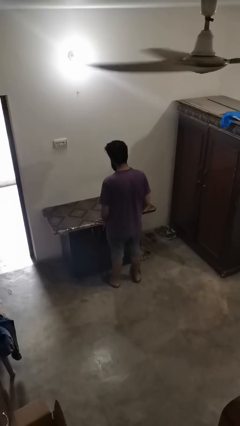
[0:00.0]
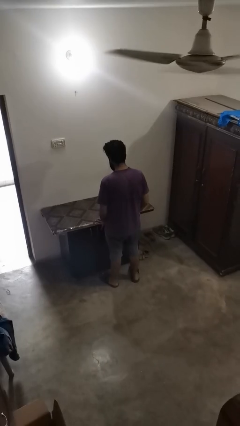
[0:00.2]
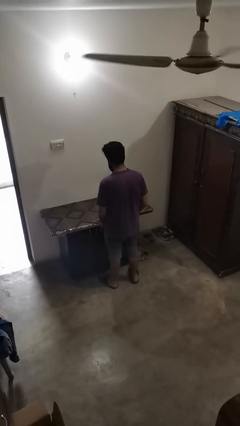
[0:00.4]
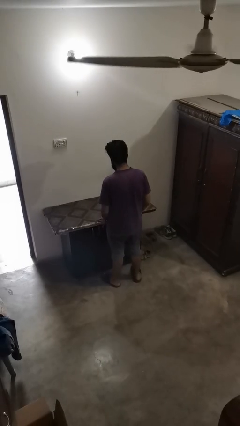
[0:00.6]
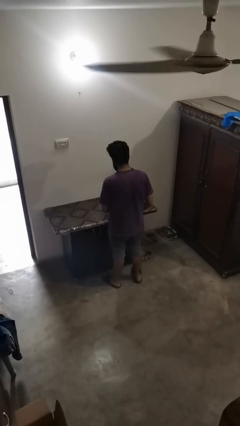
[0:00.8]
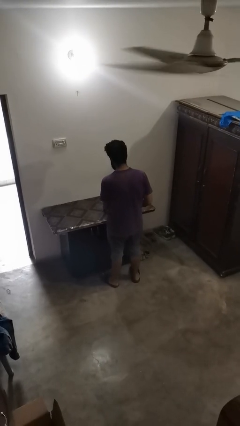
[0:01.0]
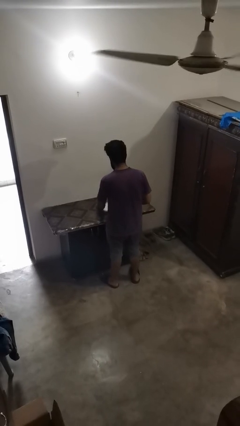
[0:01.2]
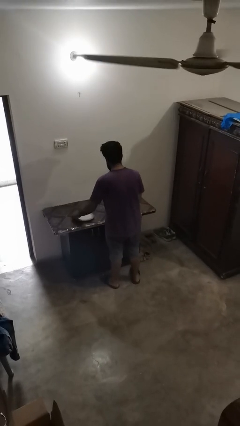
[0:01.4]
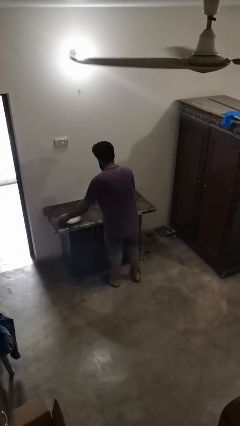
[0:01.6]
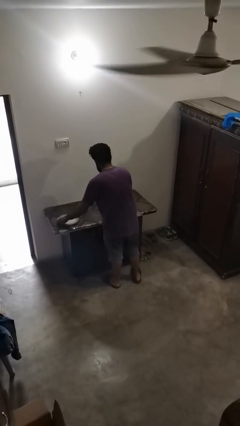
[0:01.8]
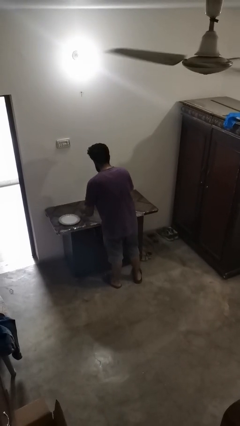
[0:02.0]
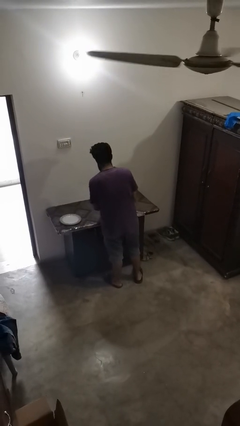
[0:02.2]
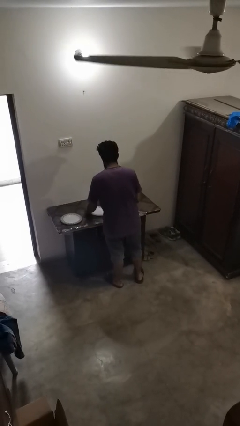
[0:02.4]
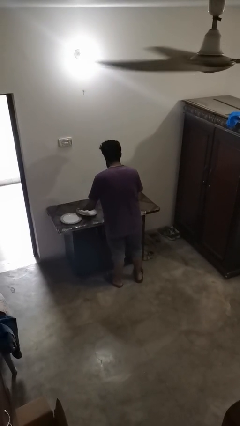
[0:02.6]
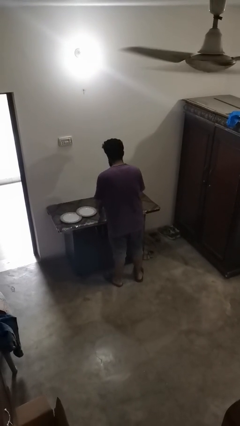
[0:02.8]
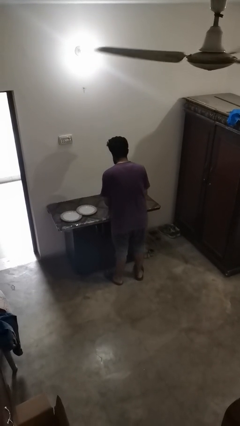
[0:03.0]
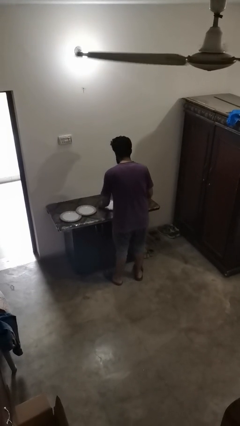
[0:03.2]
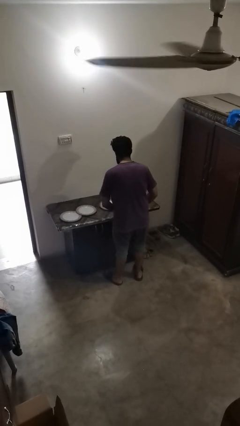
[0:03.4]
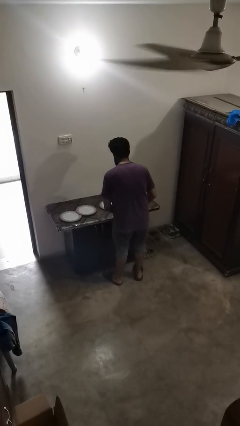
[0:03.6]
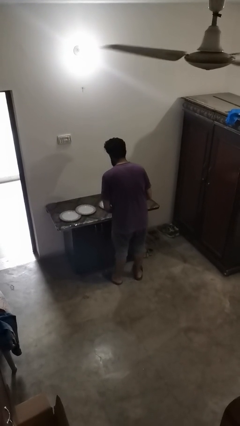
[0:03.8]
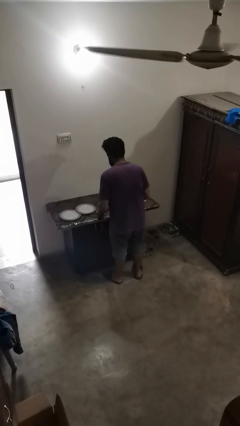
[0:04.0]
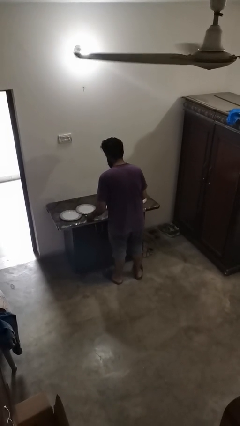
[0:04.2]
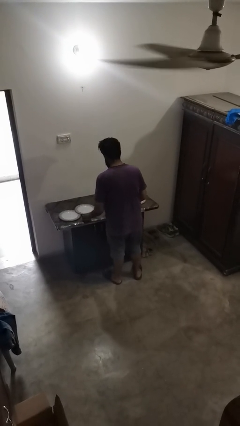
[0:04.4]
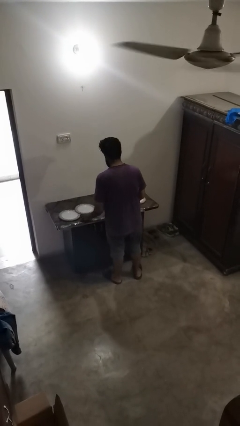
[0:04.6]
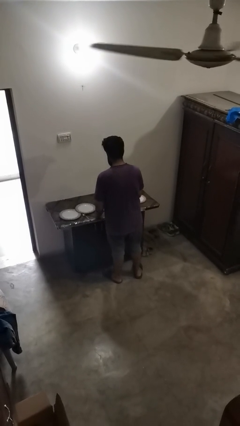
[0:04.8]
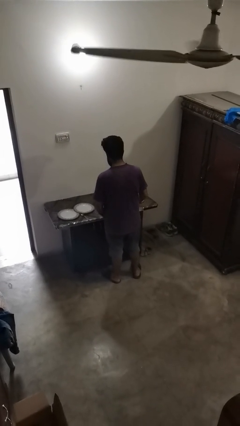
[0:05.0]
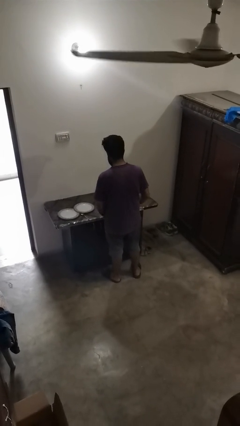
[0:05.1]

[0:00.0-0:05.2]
person sets table

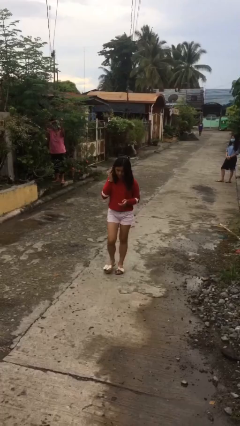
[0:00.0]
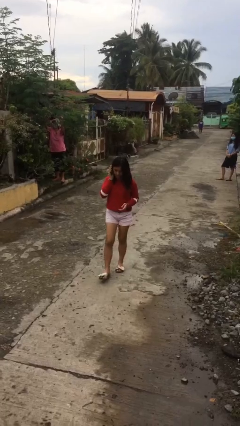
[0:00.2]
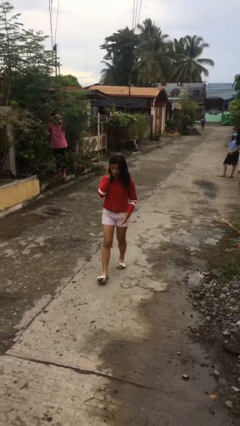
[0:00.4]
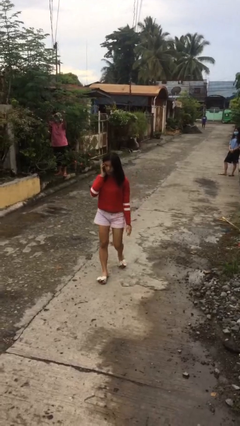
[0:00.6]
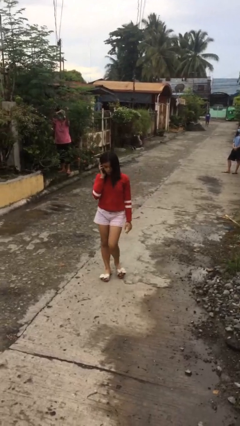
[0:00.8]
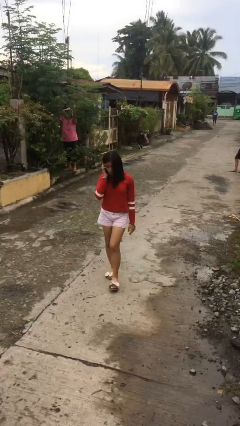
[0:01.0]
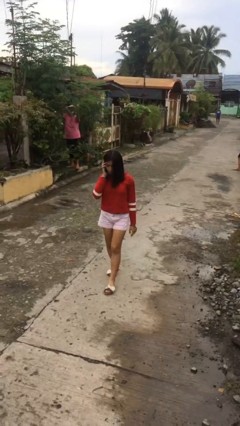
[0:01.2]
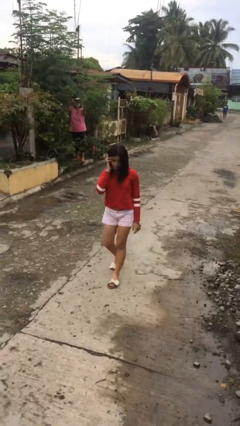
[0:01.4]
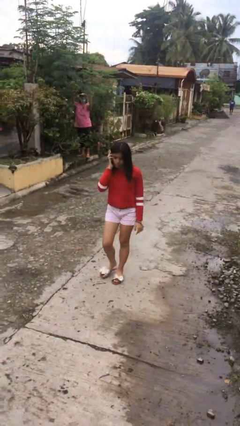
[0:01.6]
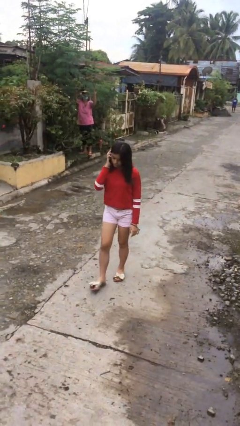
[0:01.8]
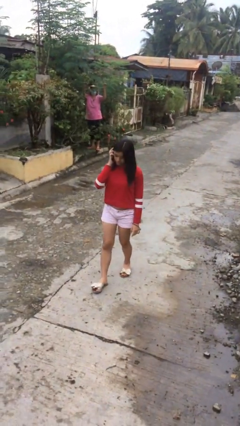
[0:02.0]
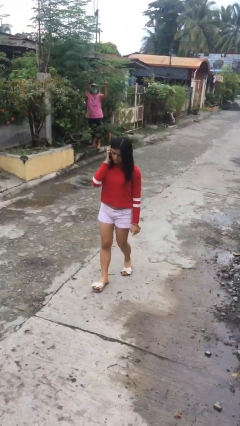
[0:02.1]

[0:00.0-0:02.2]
person talks on phone

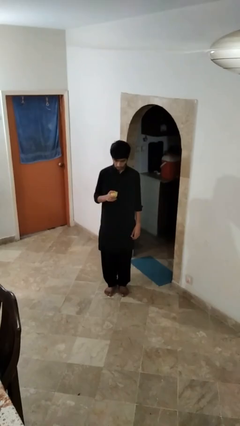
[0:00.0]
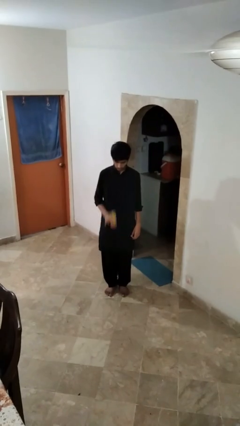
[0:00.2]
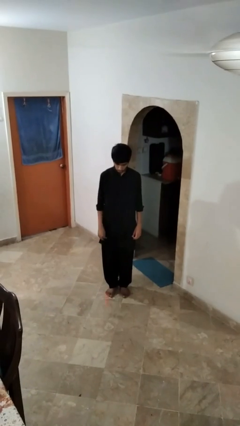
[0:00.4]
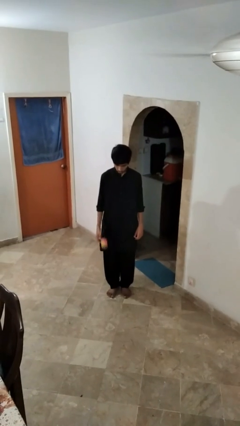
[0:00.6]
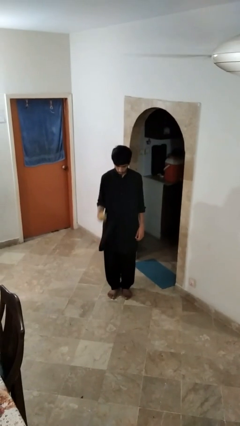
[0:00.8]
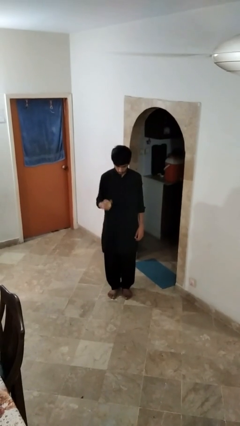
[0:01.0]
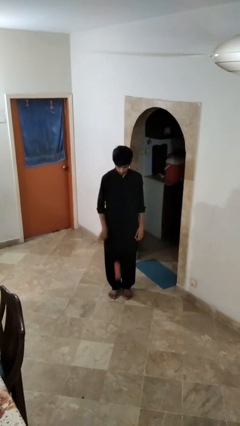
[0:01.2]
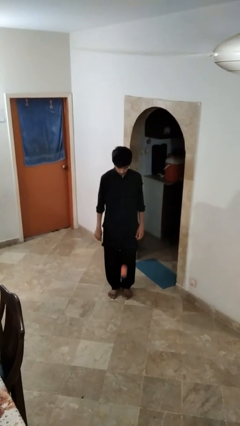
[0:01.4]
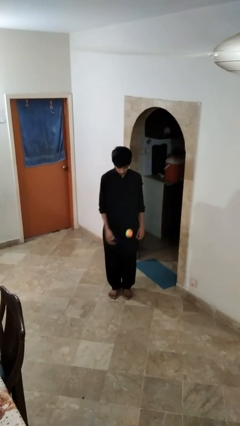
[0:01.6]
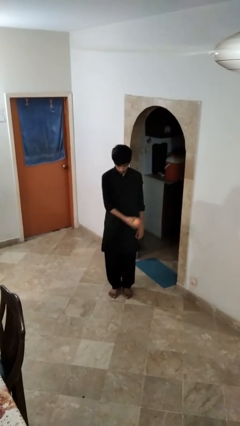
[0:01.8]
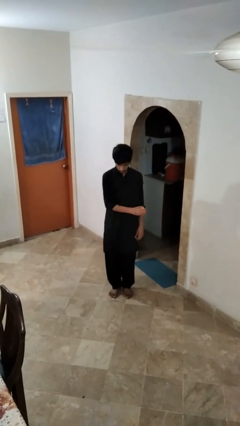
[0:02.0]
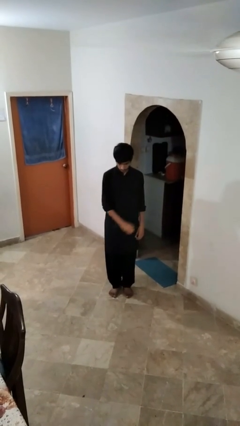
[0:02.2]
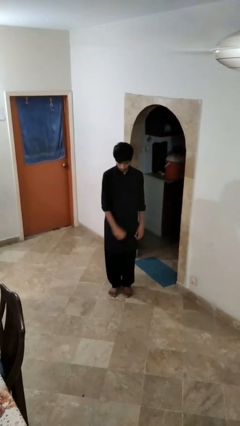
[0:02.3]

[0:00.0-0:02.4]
person bounces ball on floor

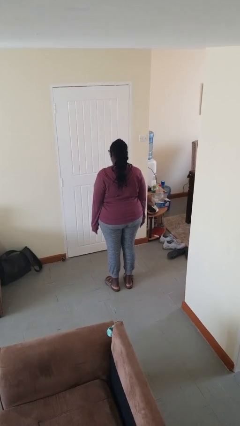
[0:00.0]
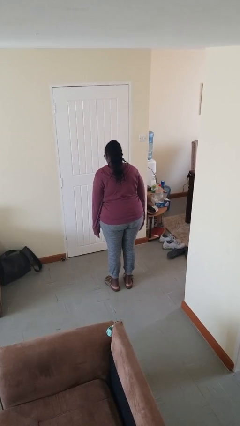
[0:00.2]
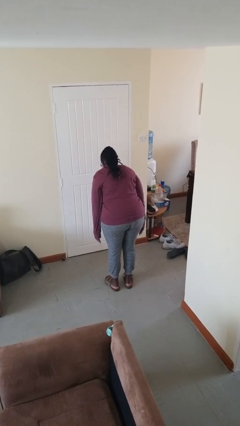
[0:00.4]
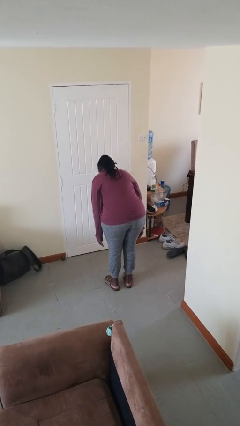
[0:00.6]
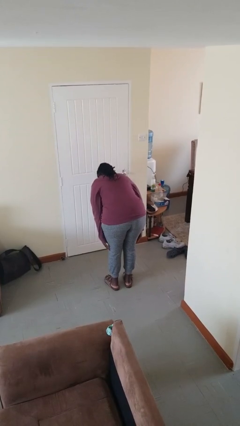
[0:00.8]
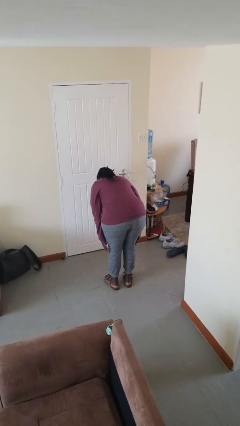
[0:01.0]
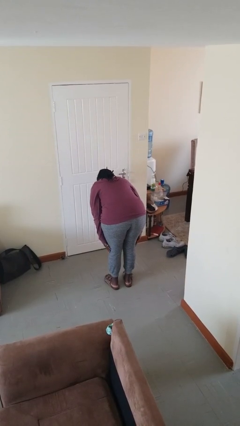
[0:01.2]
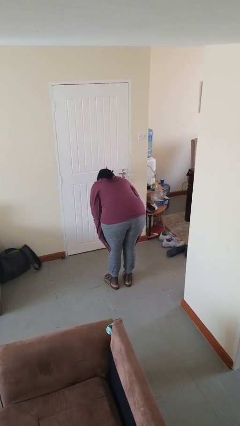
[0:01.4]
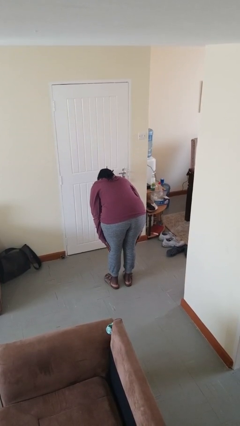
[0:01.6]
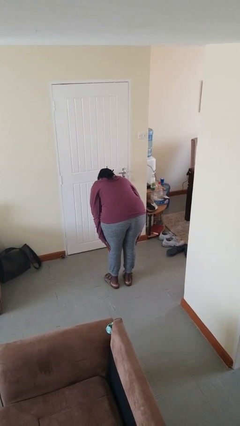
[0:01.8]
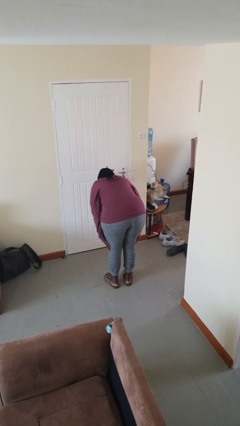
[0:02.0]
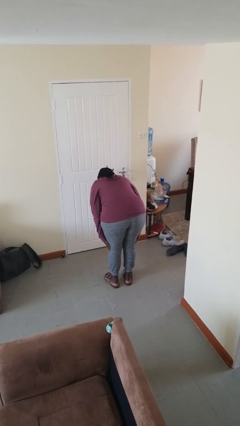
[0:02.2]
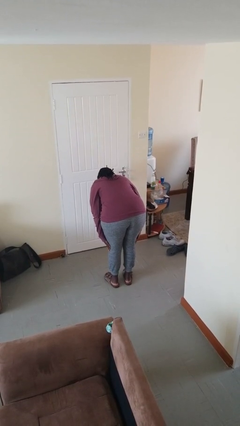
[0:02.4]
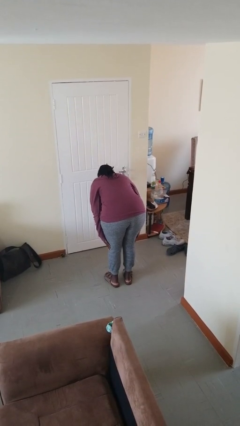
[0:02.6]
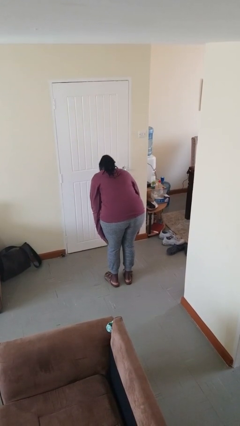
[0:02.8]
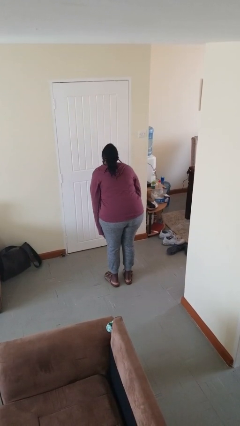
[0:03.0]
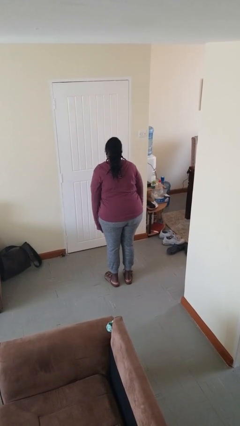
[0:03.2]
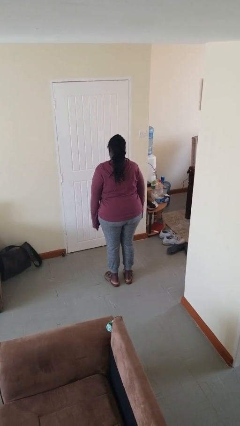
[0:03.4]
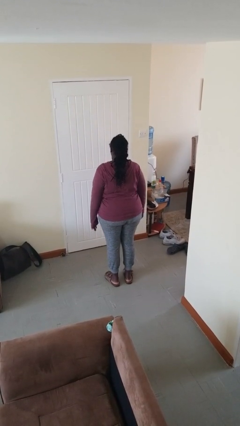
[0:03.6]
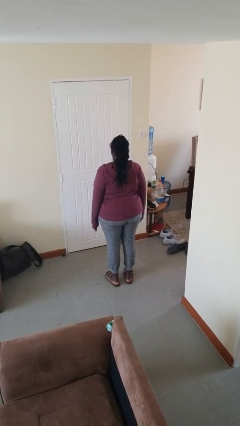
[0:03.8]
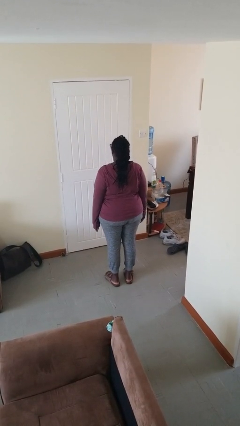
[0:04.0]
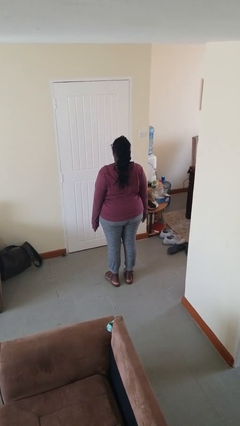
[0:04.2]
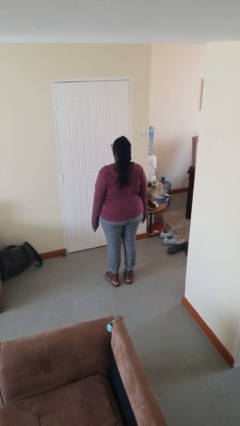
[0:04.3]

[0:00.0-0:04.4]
person bows

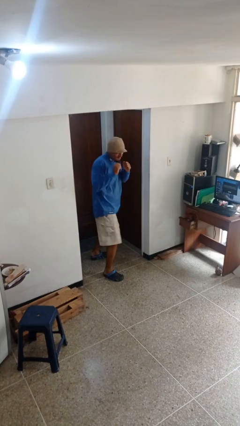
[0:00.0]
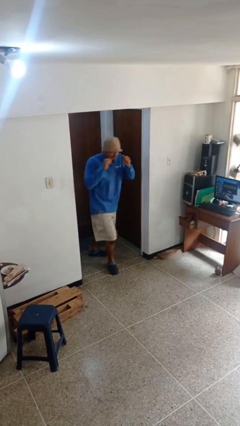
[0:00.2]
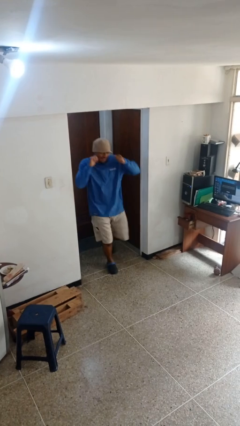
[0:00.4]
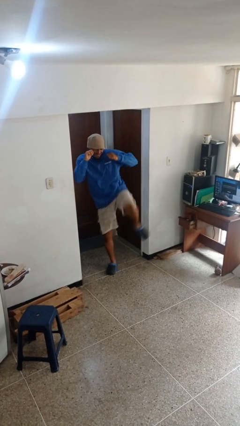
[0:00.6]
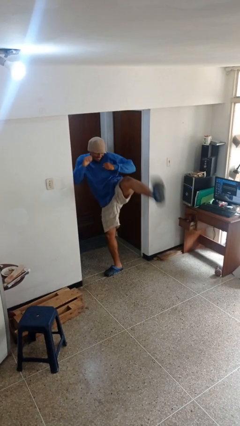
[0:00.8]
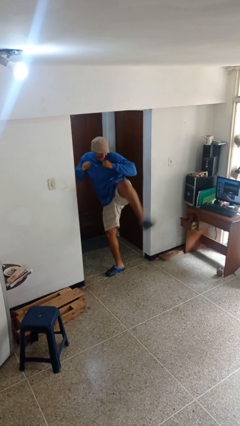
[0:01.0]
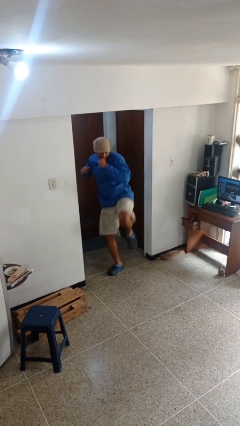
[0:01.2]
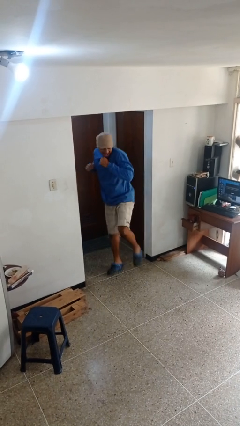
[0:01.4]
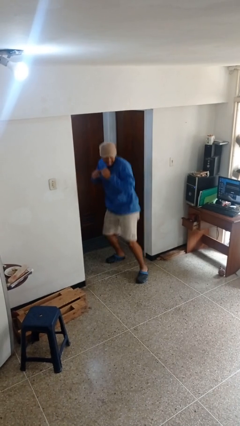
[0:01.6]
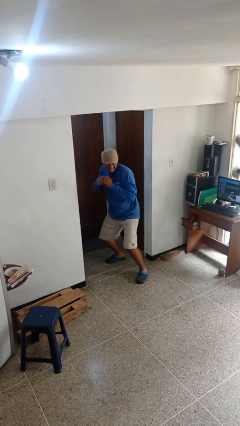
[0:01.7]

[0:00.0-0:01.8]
person karate kicks

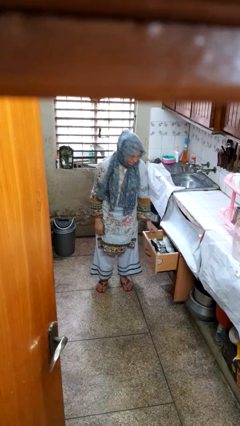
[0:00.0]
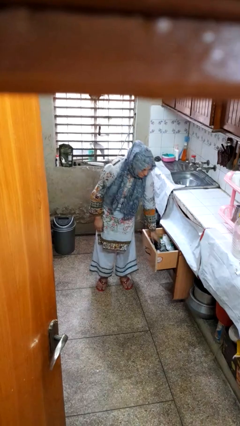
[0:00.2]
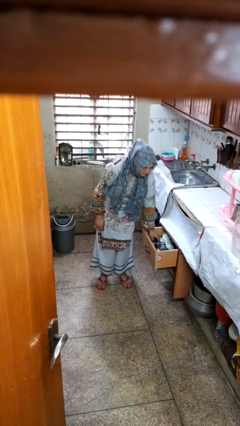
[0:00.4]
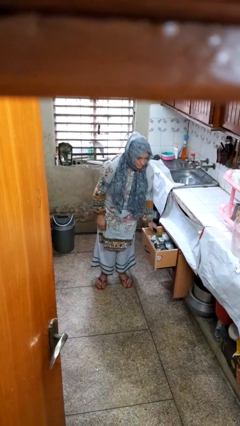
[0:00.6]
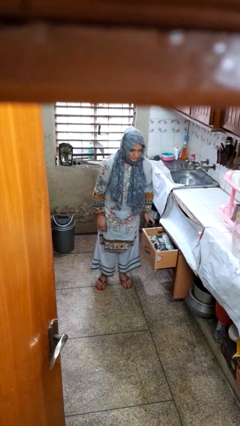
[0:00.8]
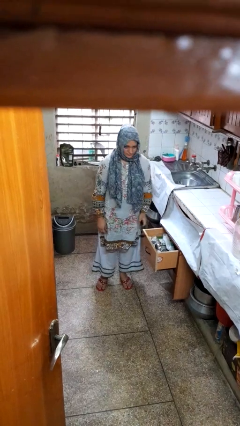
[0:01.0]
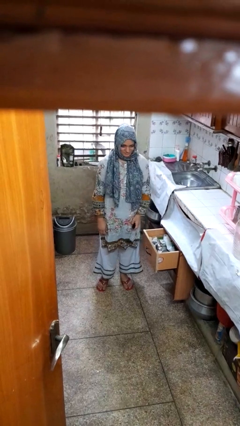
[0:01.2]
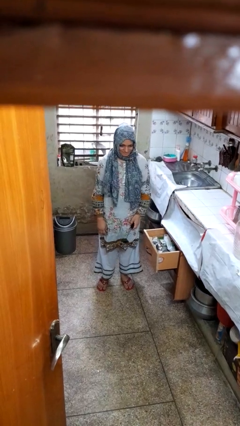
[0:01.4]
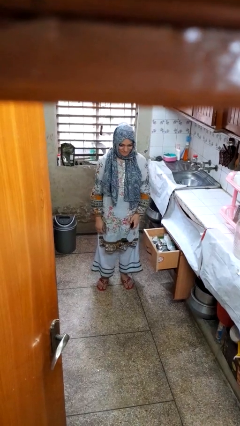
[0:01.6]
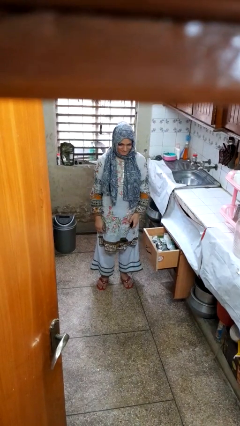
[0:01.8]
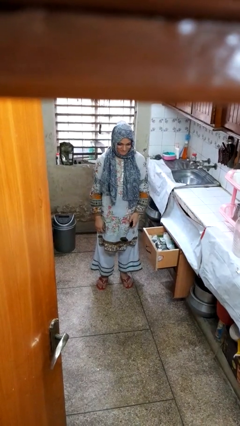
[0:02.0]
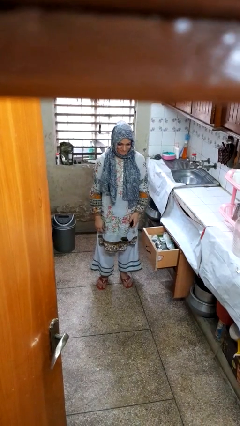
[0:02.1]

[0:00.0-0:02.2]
person takes object from kitchen drawer
